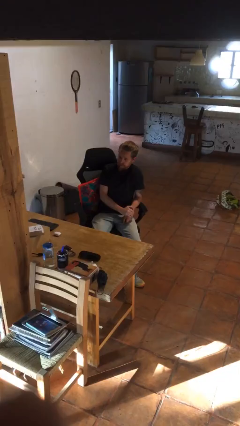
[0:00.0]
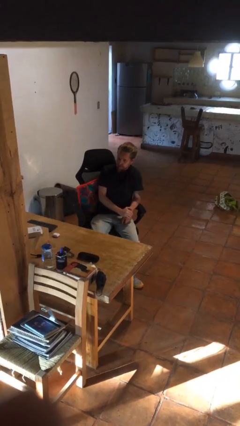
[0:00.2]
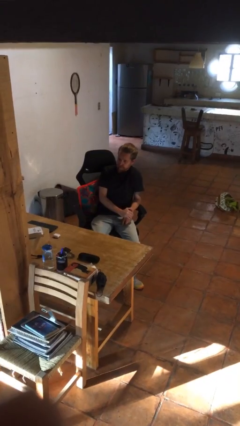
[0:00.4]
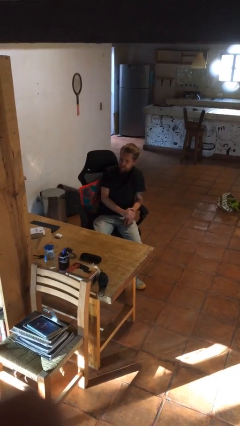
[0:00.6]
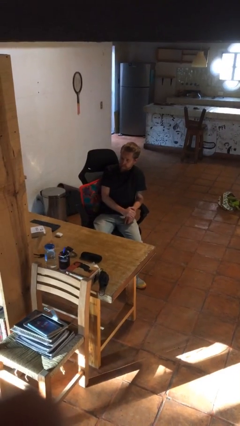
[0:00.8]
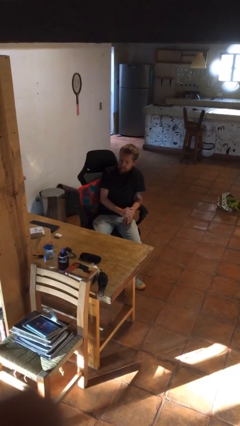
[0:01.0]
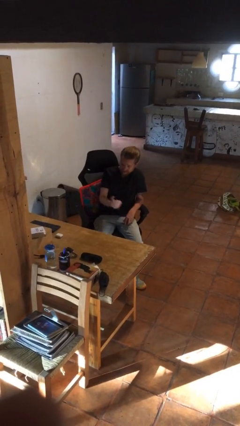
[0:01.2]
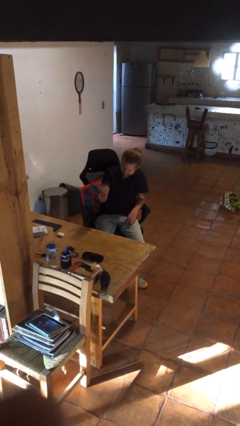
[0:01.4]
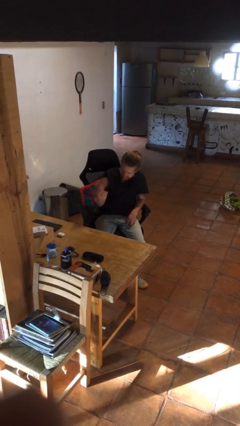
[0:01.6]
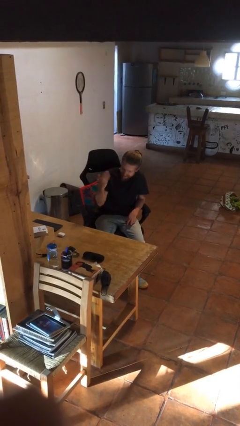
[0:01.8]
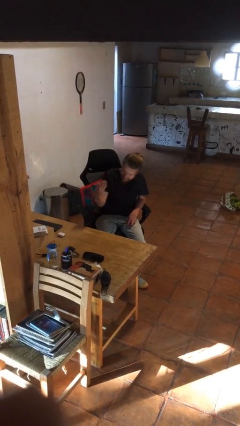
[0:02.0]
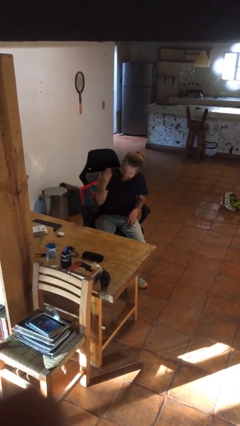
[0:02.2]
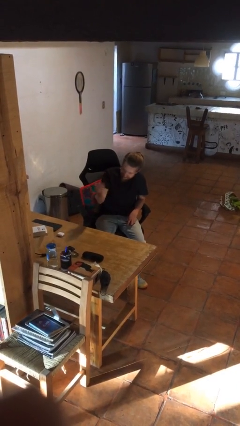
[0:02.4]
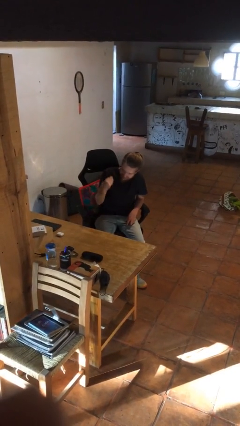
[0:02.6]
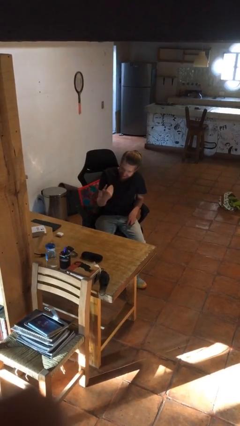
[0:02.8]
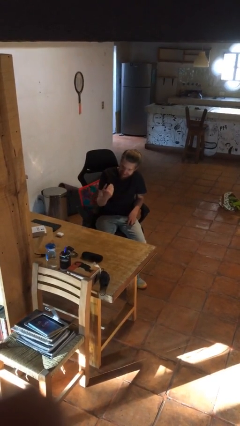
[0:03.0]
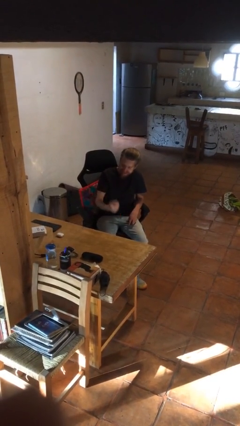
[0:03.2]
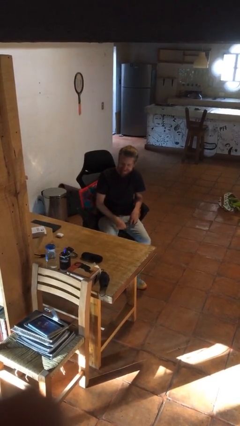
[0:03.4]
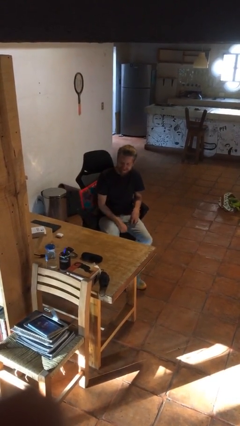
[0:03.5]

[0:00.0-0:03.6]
person gestures come here

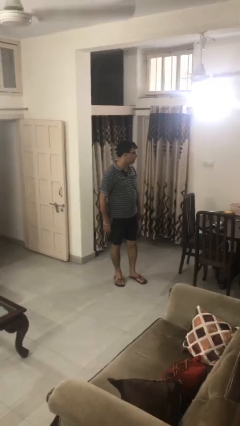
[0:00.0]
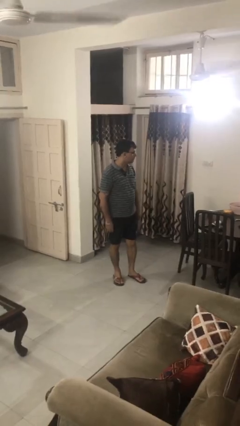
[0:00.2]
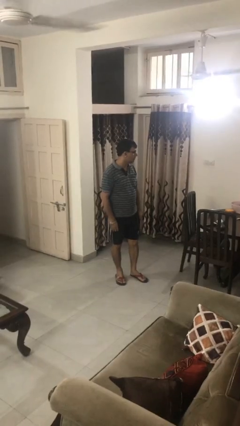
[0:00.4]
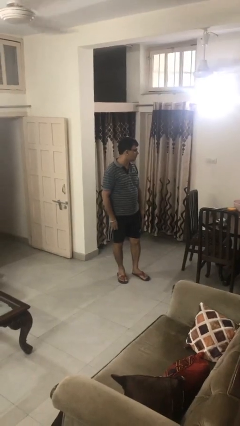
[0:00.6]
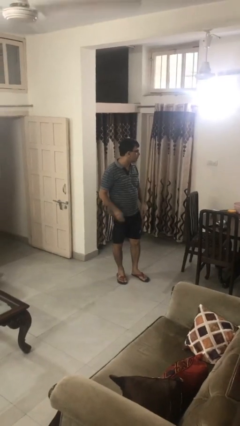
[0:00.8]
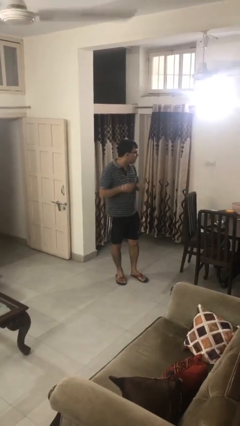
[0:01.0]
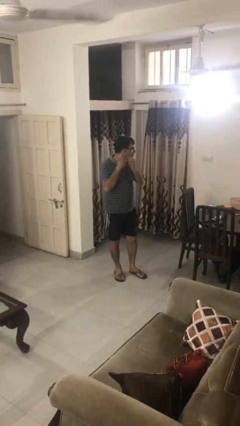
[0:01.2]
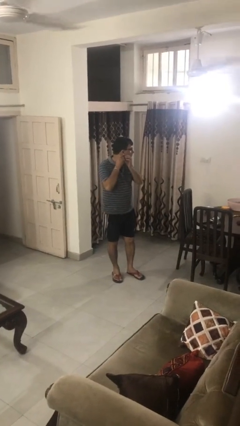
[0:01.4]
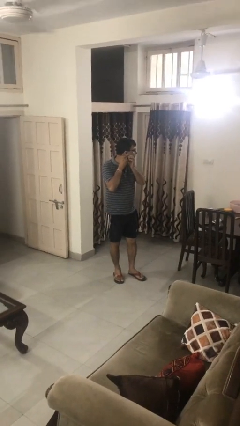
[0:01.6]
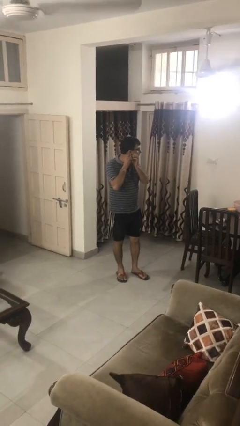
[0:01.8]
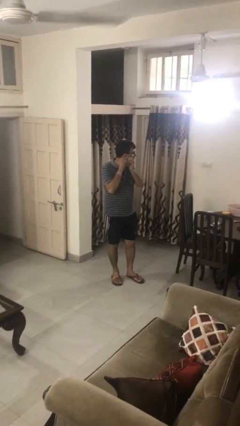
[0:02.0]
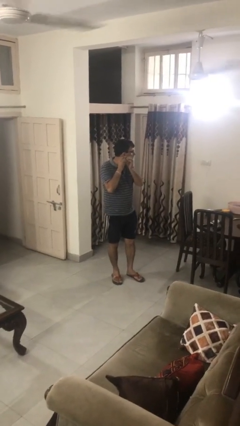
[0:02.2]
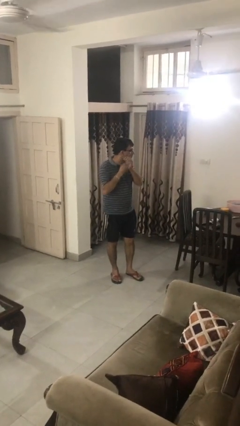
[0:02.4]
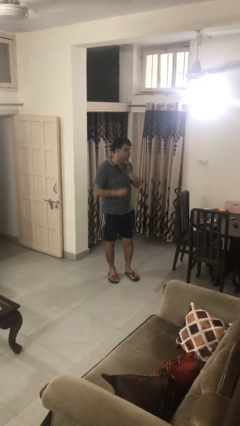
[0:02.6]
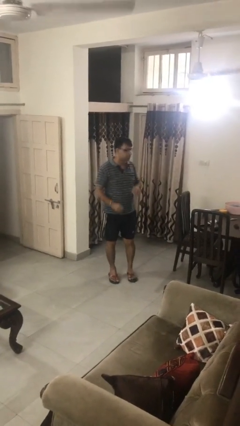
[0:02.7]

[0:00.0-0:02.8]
person takes off earrings

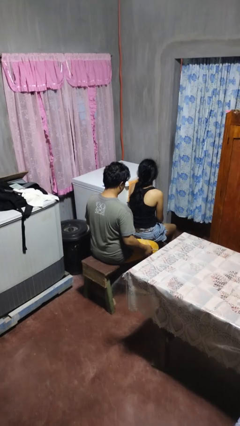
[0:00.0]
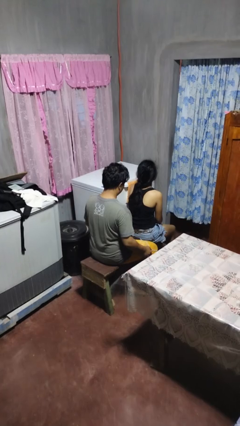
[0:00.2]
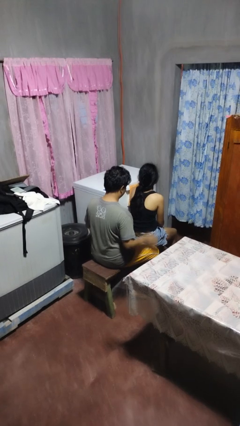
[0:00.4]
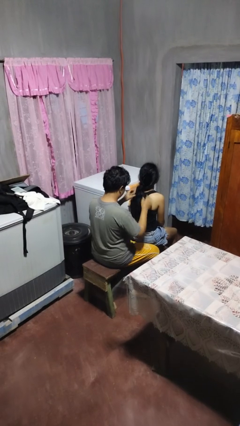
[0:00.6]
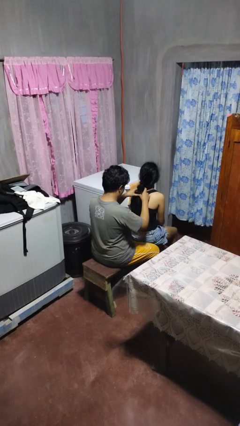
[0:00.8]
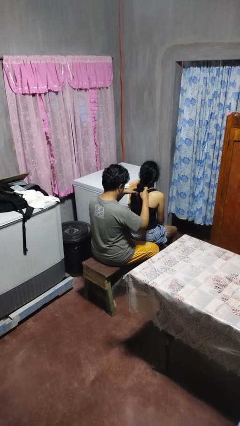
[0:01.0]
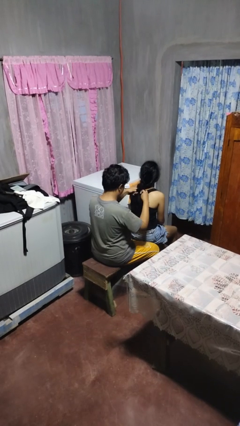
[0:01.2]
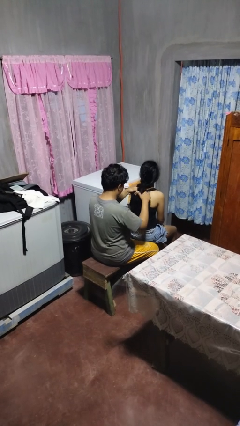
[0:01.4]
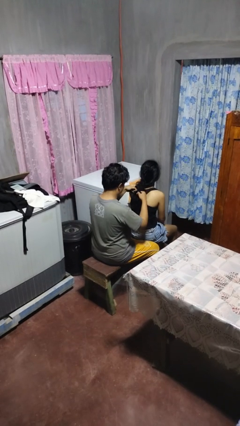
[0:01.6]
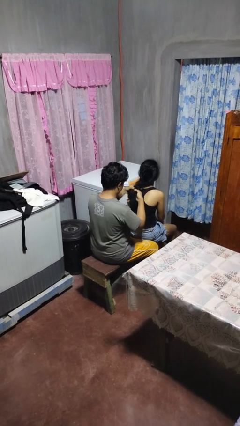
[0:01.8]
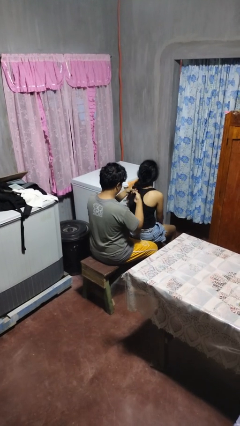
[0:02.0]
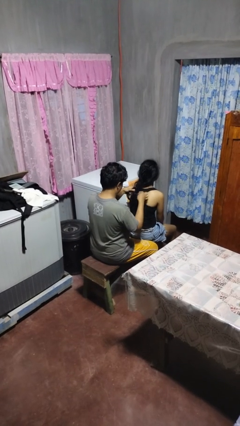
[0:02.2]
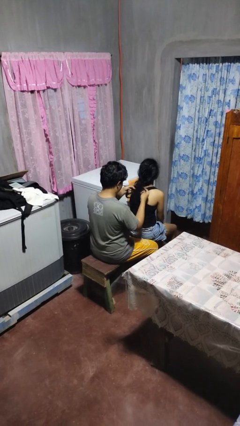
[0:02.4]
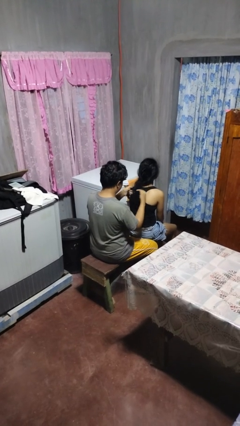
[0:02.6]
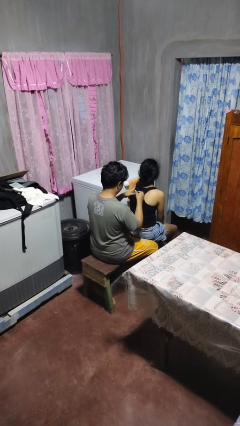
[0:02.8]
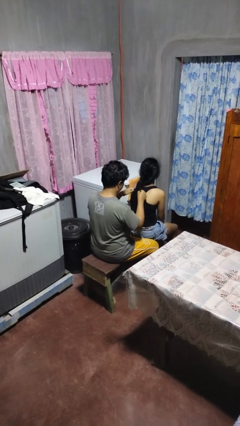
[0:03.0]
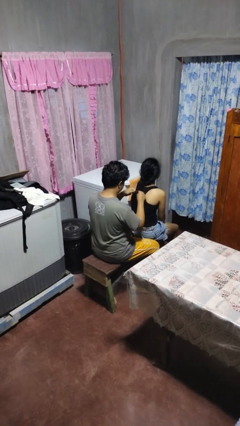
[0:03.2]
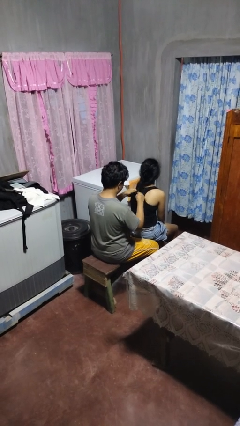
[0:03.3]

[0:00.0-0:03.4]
person braids hair of person

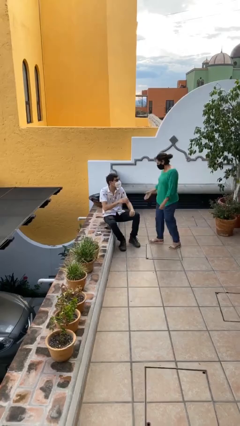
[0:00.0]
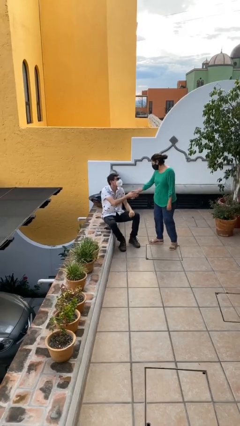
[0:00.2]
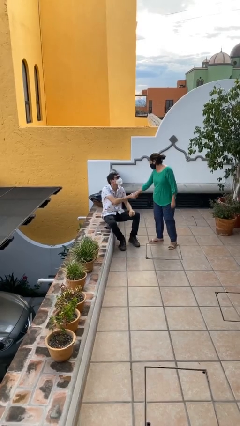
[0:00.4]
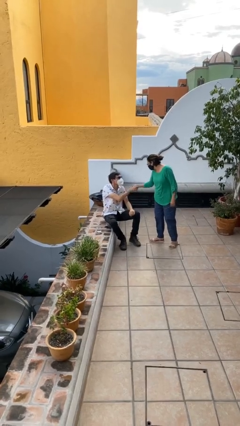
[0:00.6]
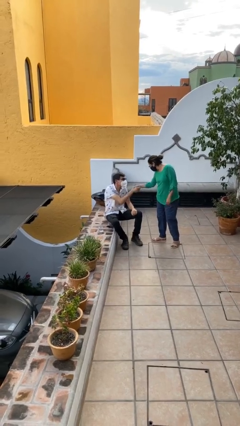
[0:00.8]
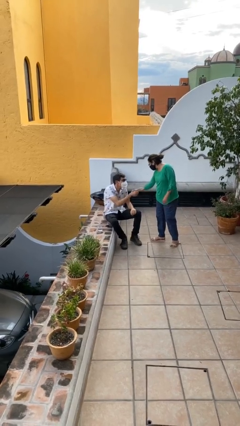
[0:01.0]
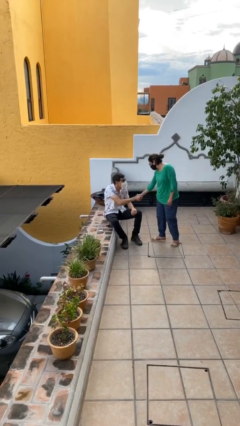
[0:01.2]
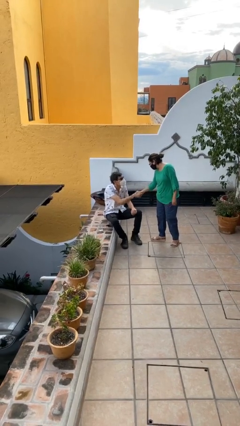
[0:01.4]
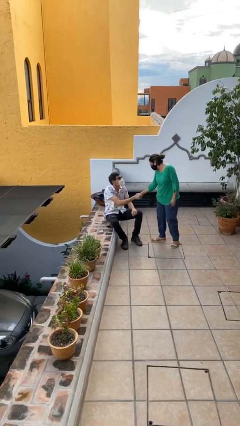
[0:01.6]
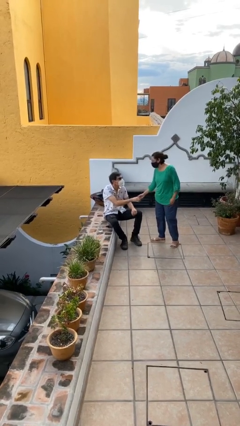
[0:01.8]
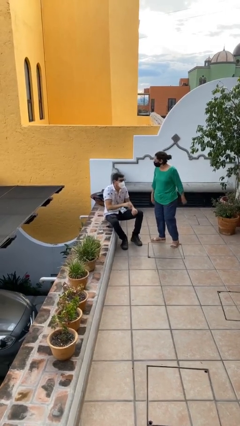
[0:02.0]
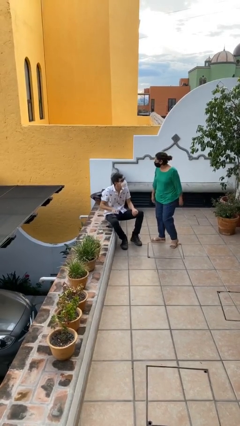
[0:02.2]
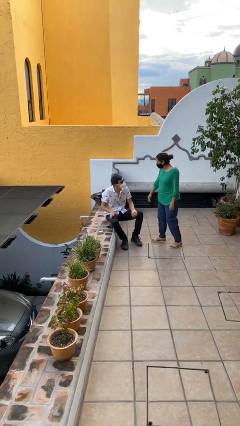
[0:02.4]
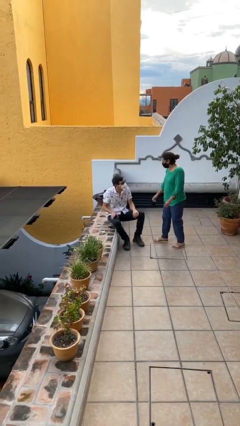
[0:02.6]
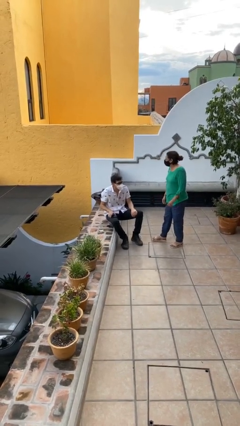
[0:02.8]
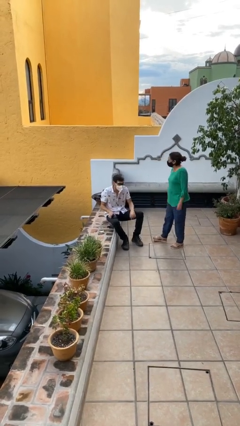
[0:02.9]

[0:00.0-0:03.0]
person shakes hand

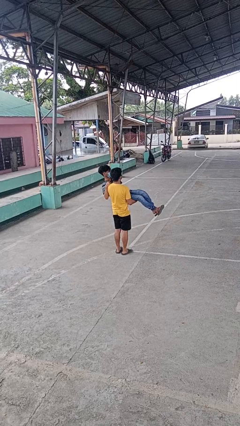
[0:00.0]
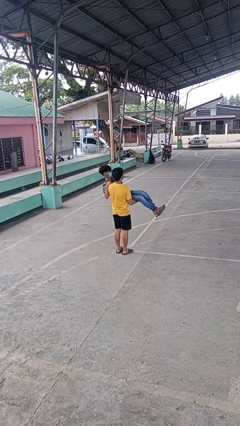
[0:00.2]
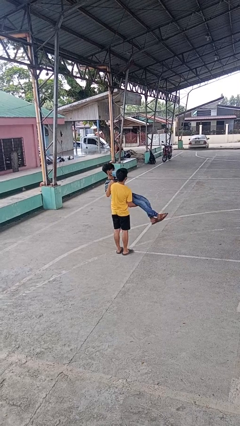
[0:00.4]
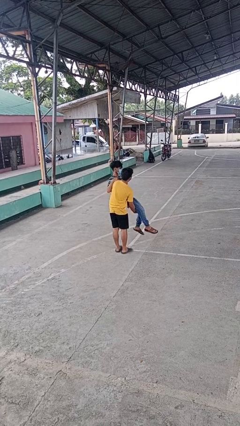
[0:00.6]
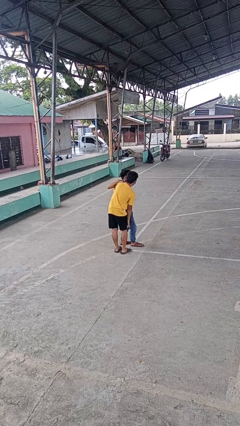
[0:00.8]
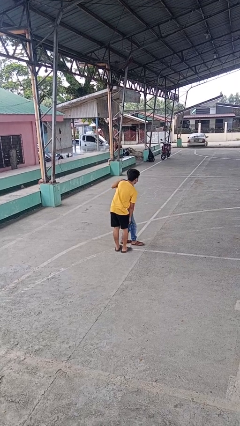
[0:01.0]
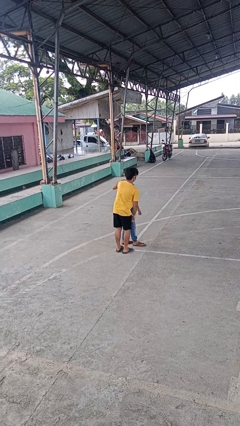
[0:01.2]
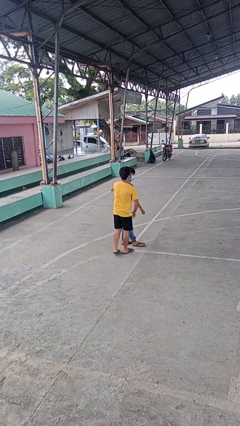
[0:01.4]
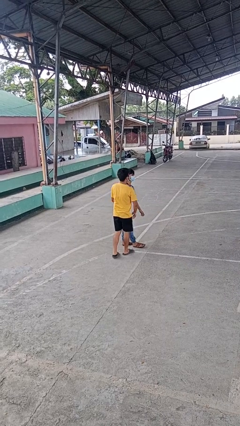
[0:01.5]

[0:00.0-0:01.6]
person puts down person

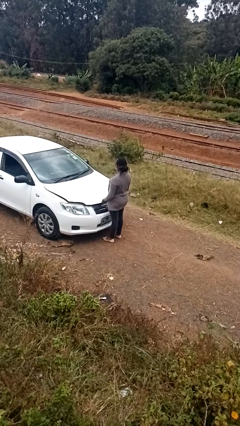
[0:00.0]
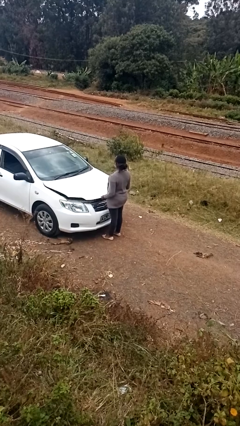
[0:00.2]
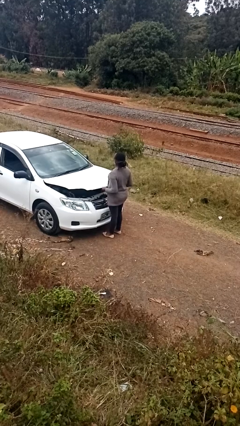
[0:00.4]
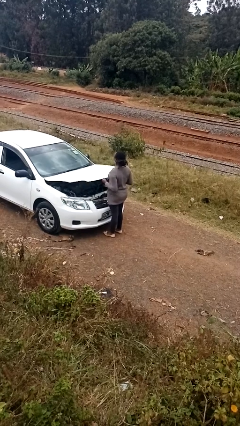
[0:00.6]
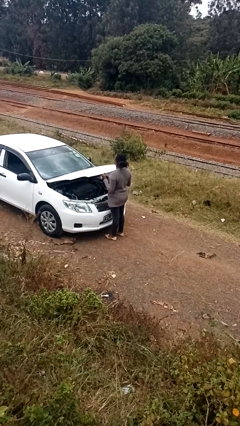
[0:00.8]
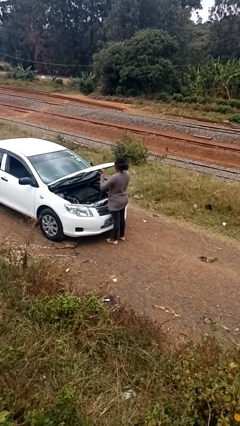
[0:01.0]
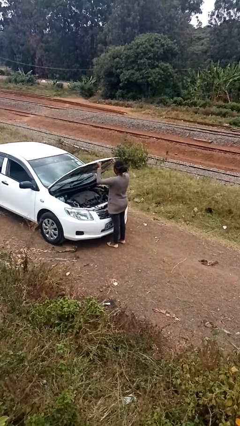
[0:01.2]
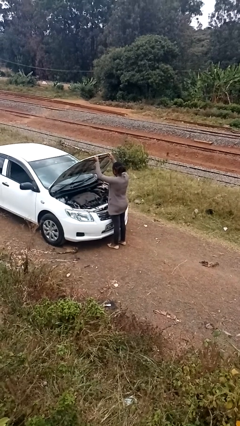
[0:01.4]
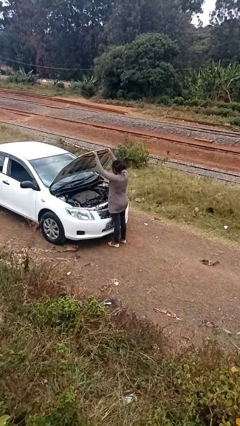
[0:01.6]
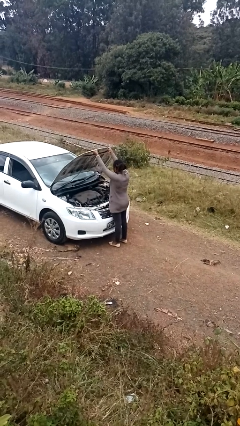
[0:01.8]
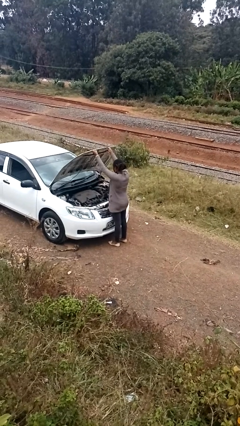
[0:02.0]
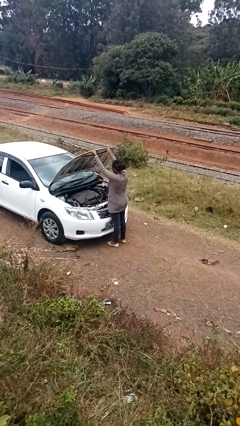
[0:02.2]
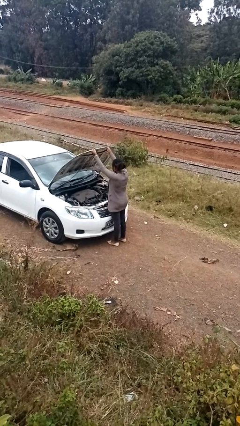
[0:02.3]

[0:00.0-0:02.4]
person opens car hood

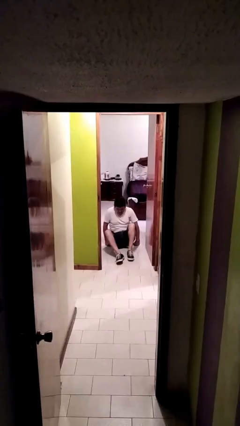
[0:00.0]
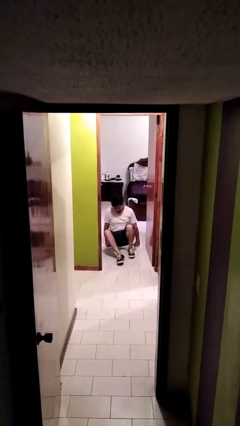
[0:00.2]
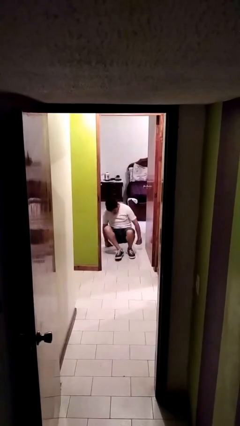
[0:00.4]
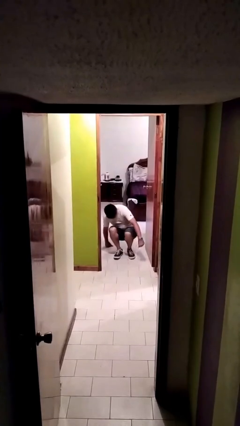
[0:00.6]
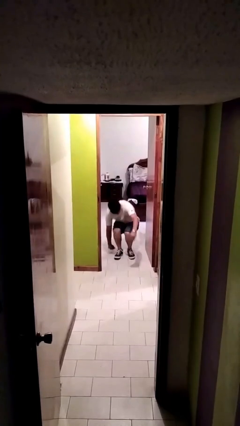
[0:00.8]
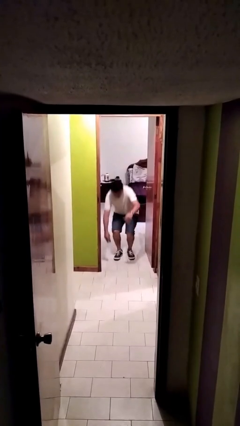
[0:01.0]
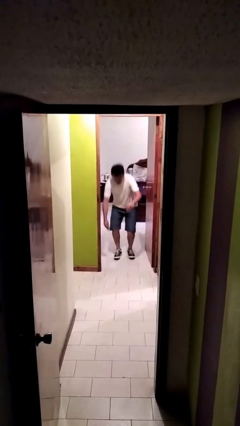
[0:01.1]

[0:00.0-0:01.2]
person stands up
